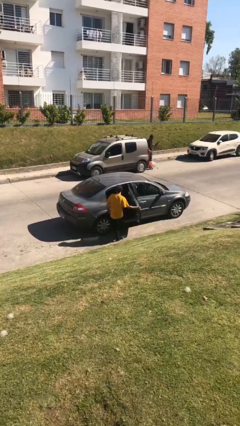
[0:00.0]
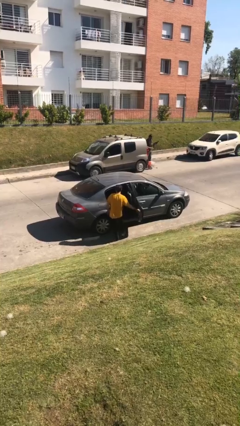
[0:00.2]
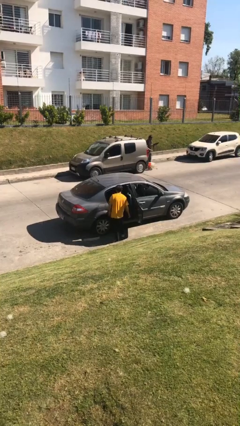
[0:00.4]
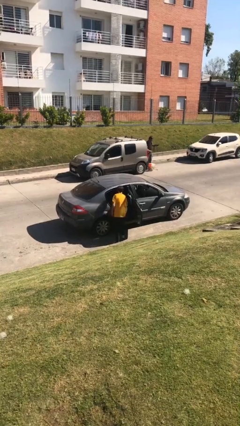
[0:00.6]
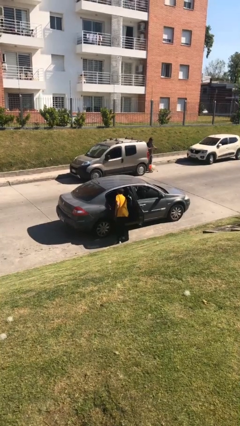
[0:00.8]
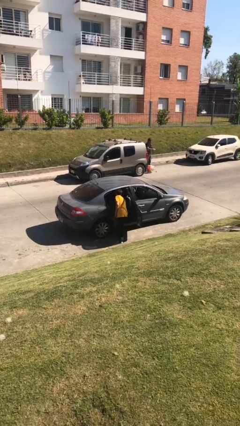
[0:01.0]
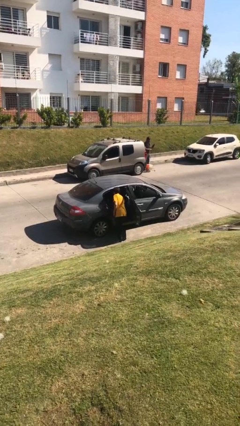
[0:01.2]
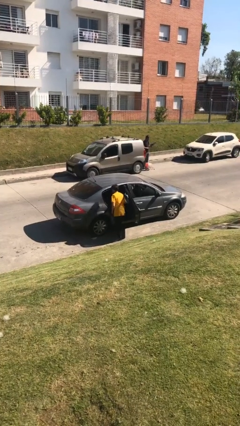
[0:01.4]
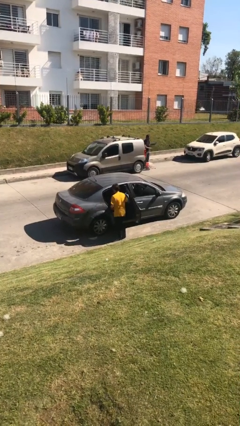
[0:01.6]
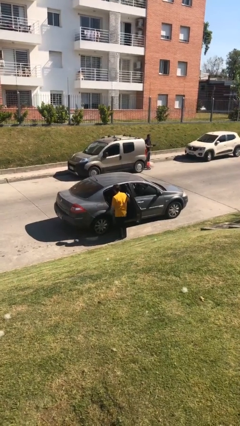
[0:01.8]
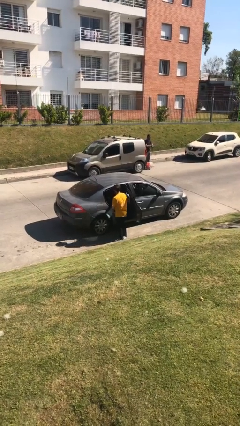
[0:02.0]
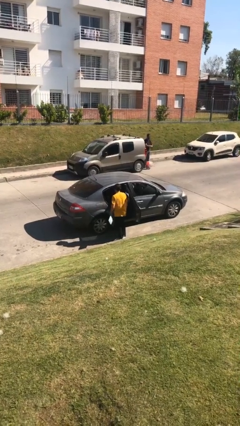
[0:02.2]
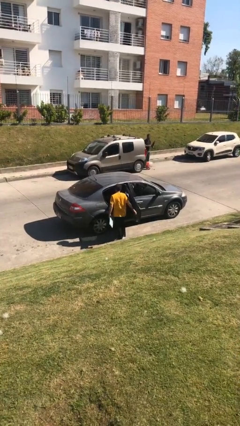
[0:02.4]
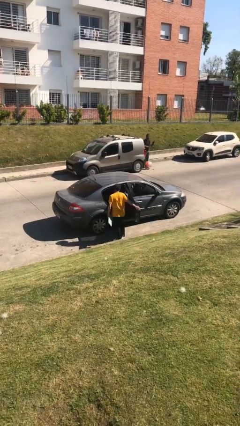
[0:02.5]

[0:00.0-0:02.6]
person unloads car

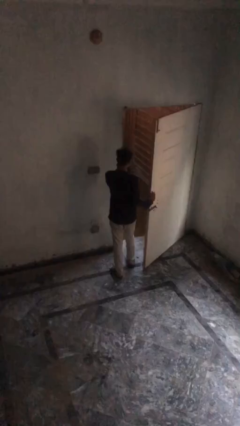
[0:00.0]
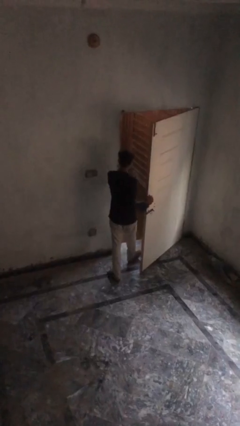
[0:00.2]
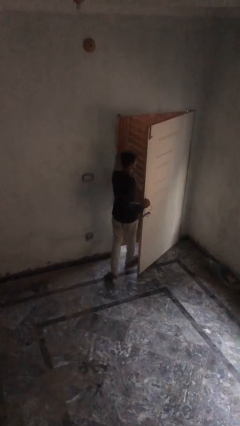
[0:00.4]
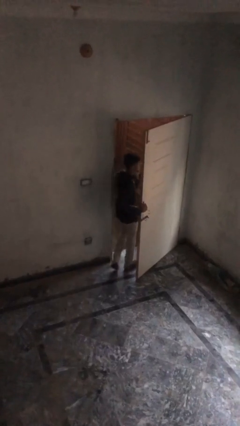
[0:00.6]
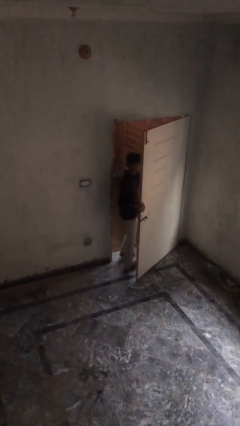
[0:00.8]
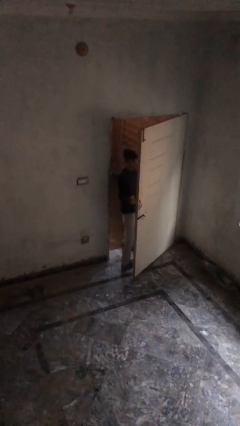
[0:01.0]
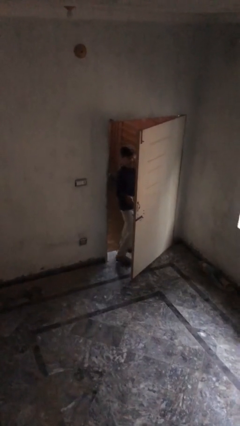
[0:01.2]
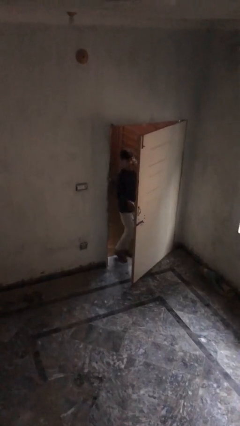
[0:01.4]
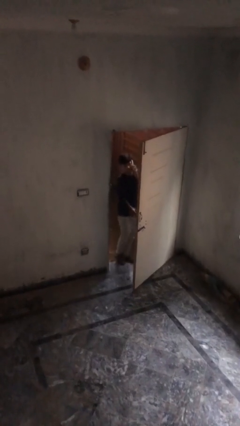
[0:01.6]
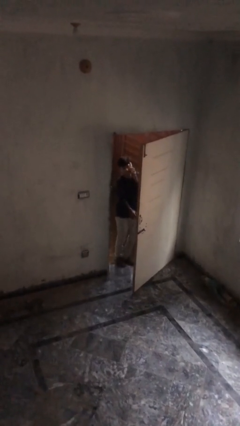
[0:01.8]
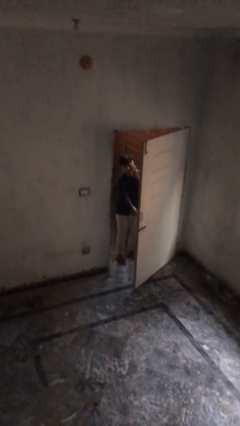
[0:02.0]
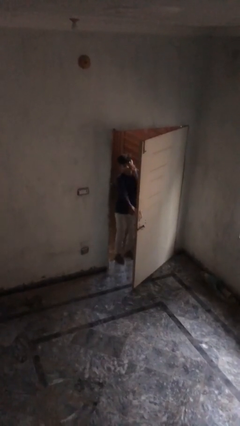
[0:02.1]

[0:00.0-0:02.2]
person exits scene through structure

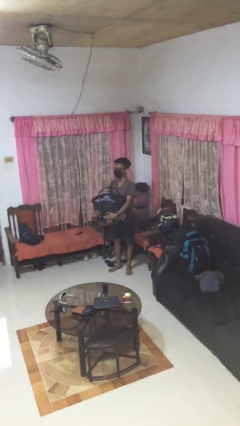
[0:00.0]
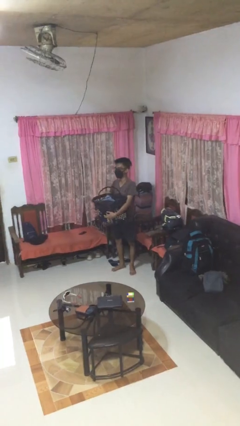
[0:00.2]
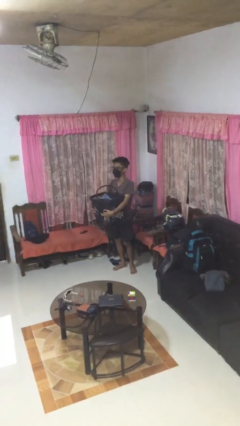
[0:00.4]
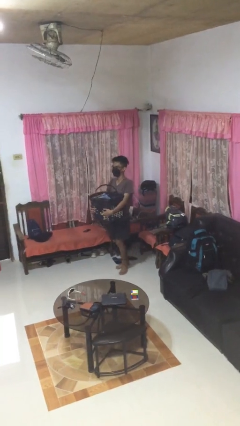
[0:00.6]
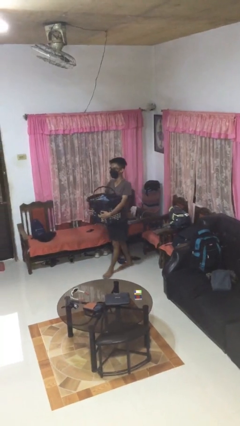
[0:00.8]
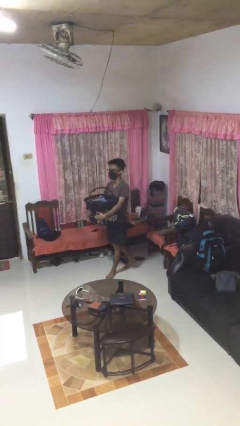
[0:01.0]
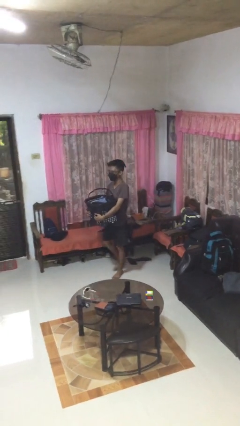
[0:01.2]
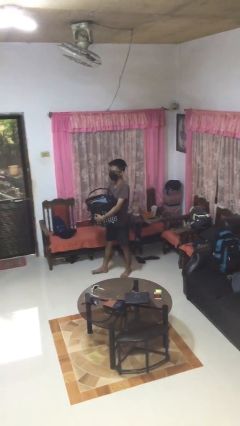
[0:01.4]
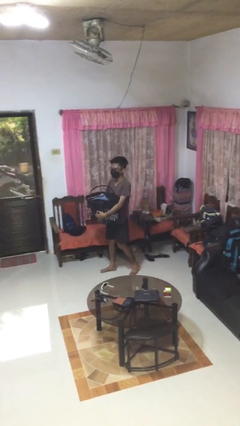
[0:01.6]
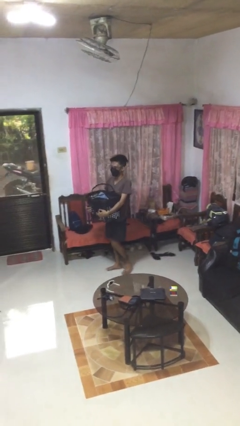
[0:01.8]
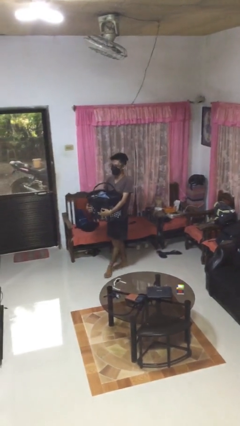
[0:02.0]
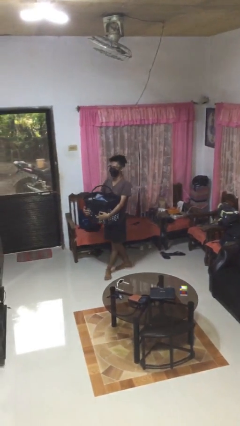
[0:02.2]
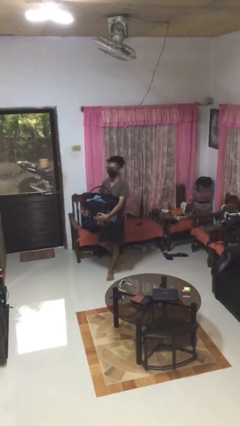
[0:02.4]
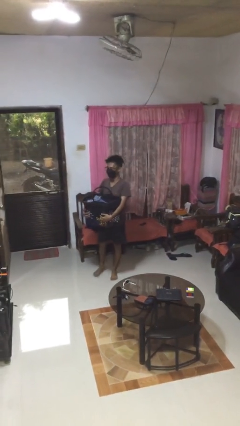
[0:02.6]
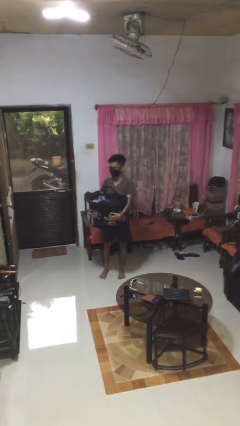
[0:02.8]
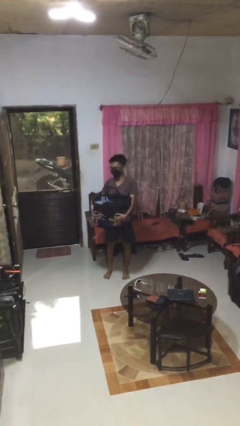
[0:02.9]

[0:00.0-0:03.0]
person carries laundry basket

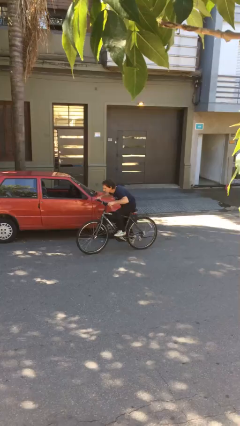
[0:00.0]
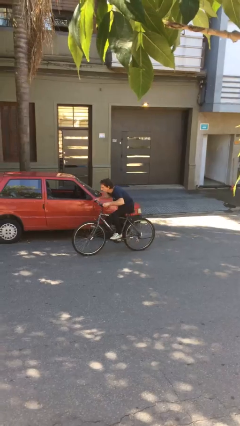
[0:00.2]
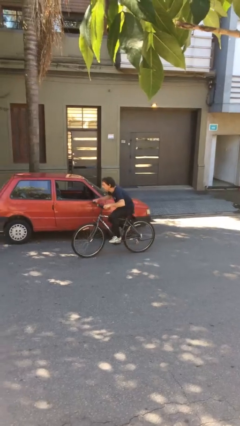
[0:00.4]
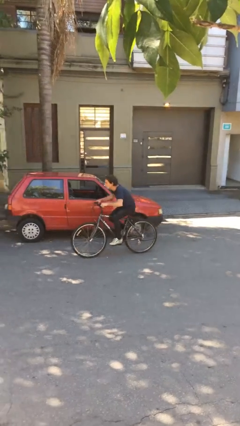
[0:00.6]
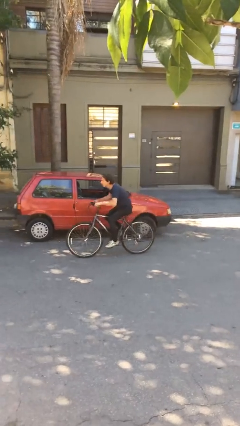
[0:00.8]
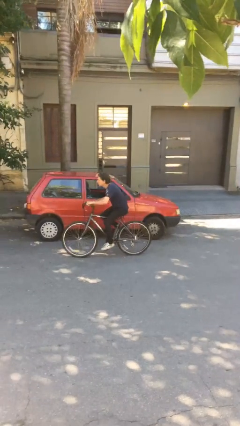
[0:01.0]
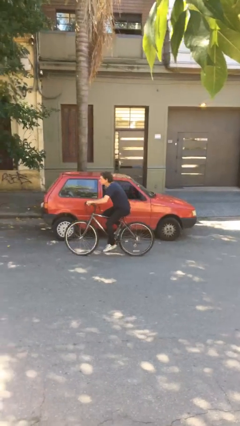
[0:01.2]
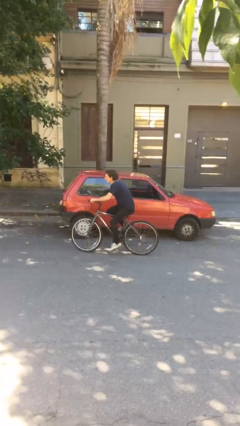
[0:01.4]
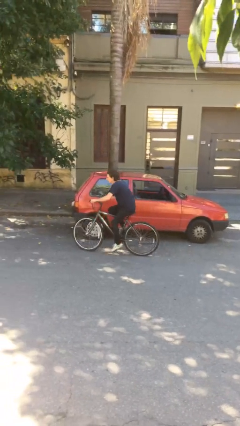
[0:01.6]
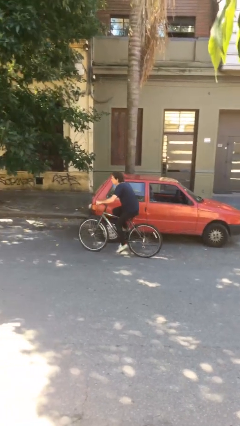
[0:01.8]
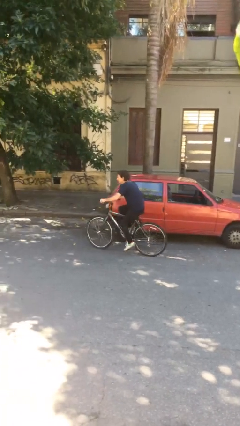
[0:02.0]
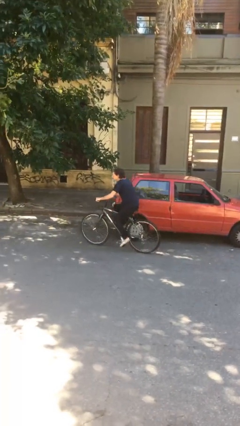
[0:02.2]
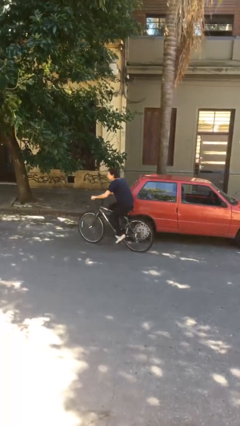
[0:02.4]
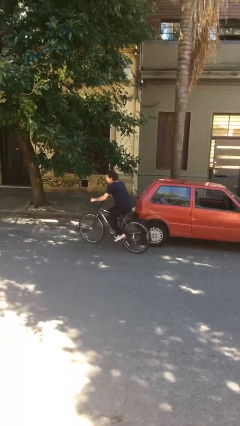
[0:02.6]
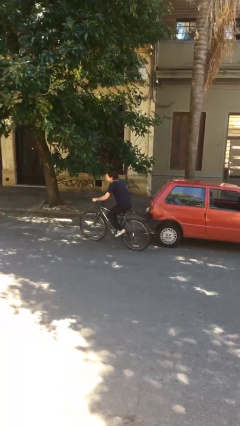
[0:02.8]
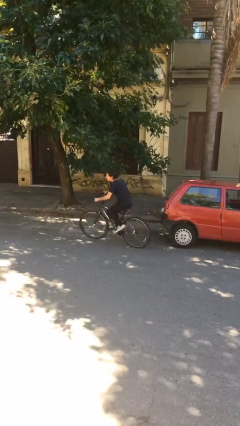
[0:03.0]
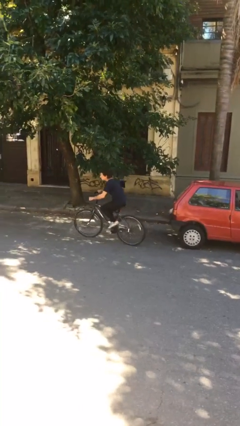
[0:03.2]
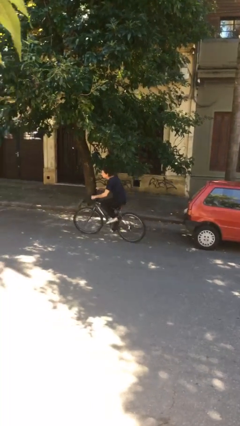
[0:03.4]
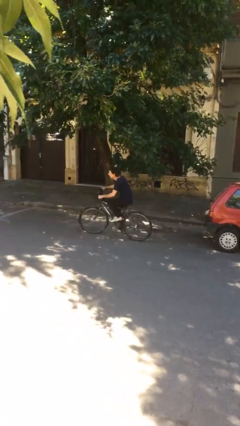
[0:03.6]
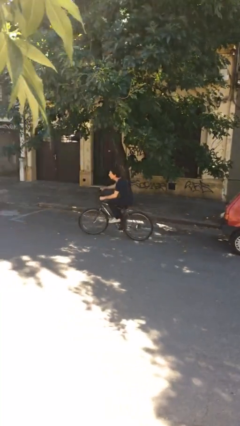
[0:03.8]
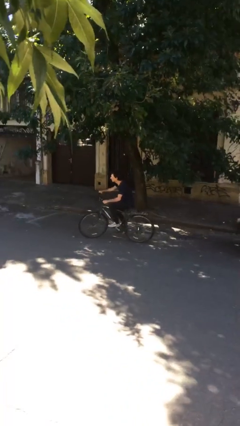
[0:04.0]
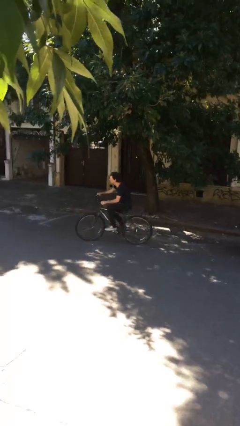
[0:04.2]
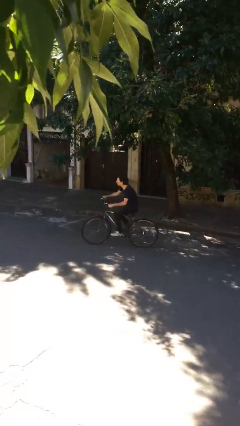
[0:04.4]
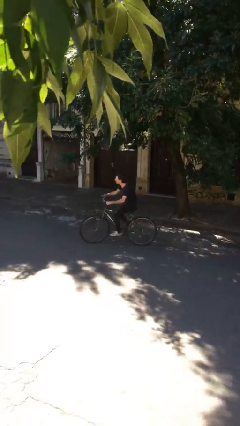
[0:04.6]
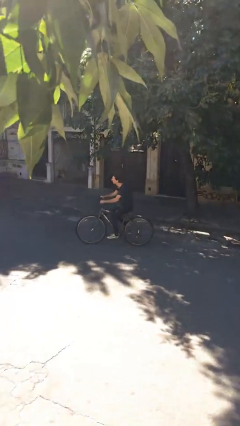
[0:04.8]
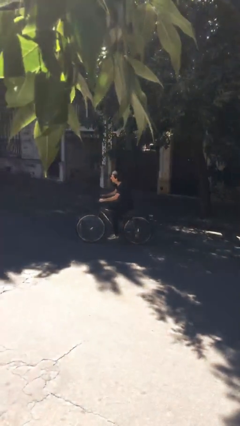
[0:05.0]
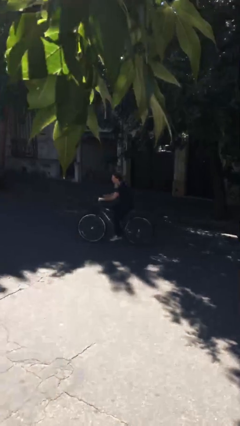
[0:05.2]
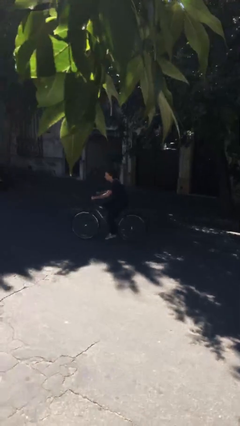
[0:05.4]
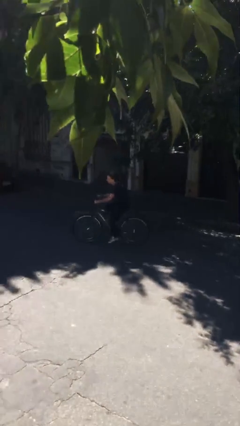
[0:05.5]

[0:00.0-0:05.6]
person rides bicycle

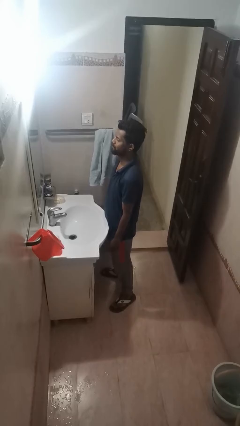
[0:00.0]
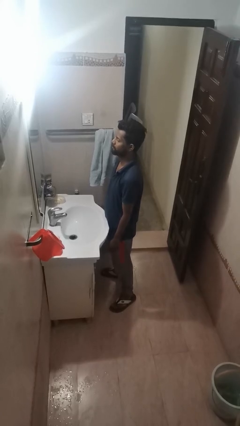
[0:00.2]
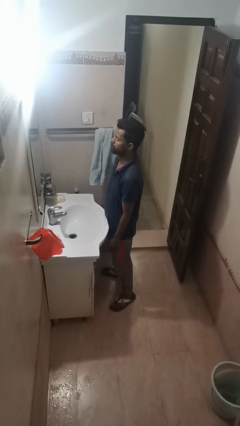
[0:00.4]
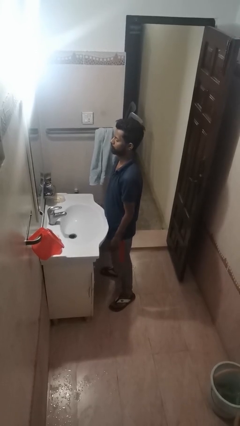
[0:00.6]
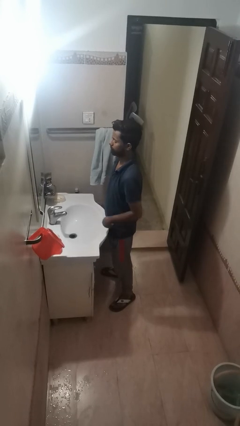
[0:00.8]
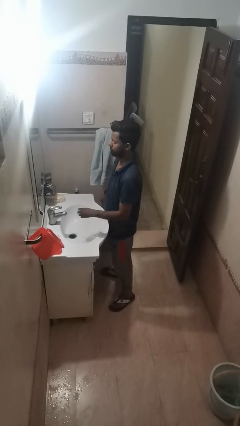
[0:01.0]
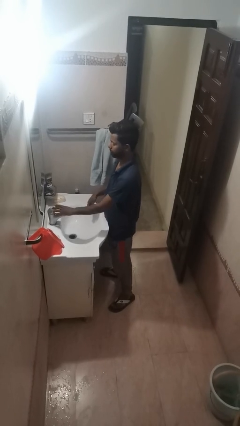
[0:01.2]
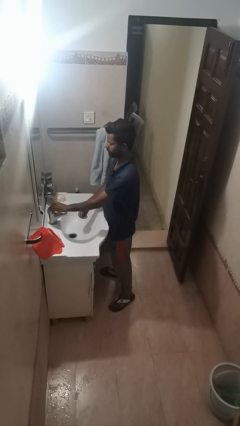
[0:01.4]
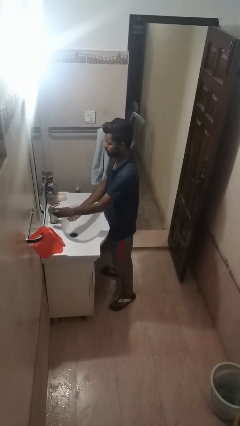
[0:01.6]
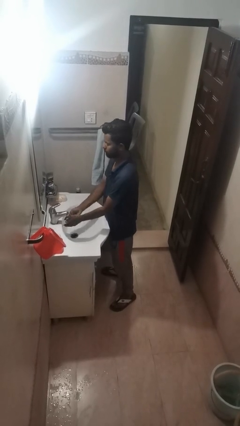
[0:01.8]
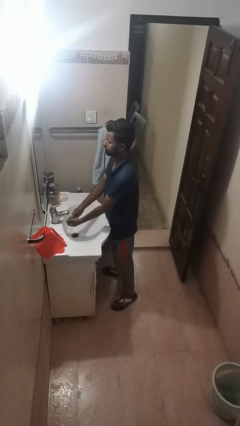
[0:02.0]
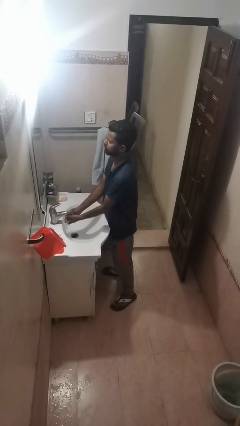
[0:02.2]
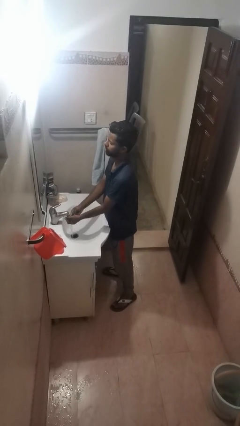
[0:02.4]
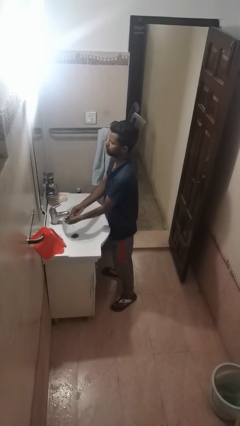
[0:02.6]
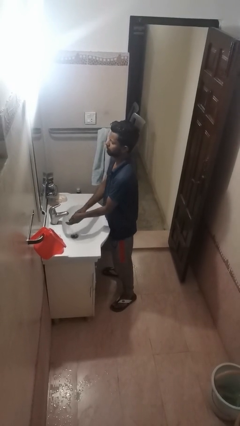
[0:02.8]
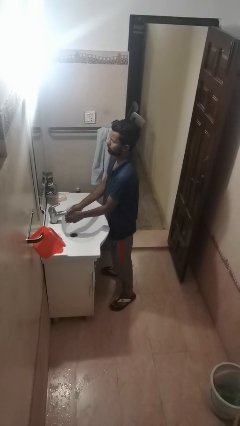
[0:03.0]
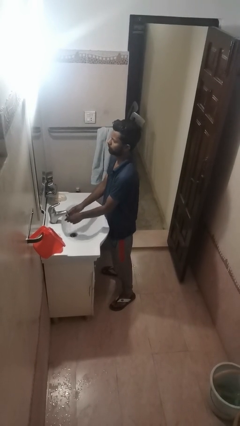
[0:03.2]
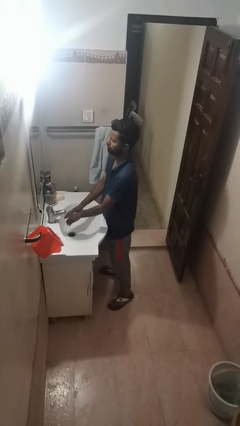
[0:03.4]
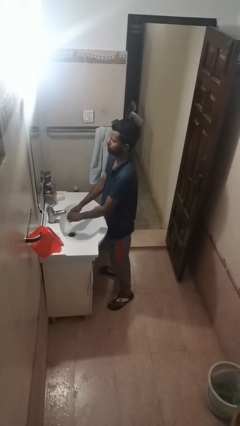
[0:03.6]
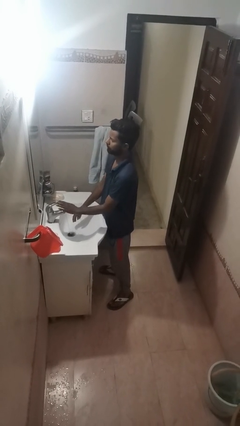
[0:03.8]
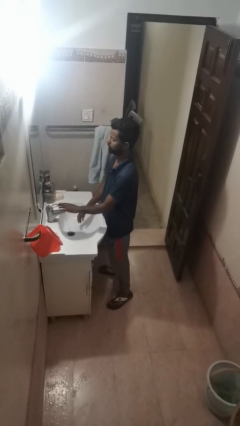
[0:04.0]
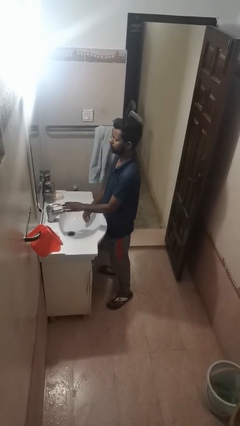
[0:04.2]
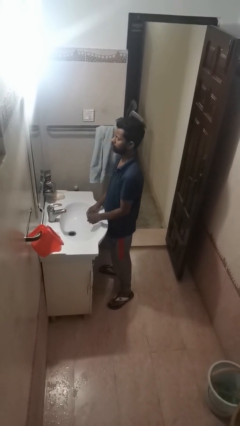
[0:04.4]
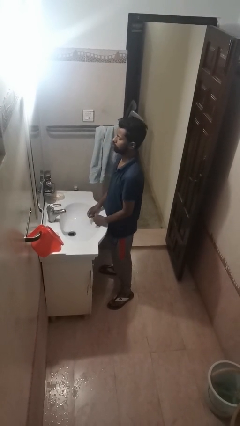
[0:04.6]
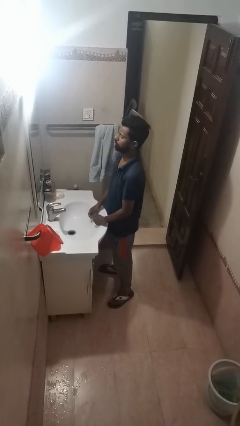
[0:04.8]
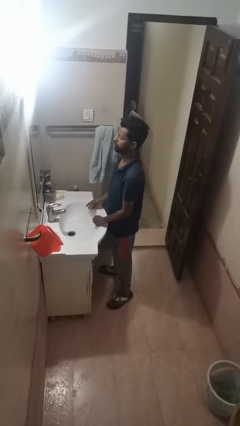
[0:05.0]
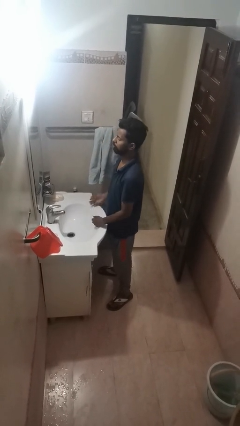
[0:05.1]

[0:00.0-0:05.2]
person washes face
